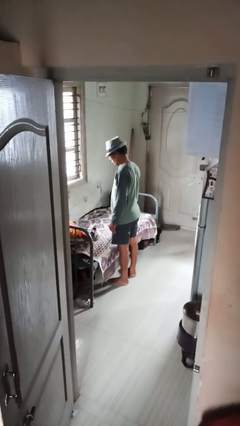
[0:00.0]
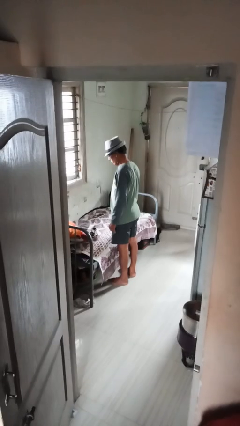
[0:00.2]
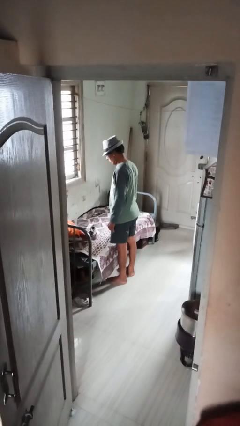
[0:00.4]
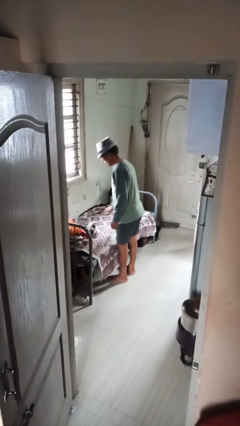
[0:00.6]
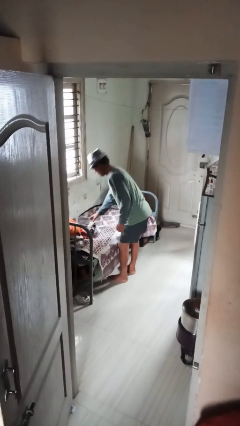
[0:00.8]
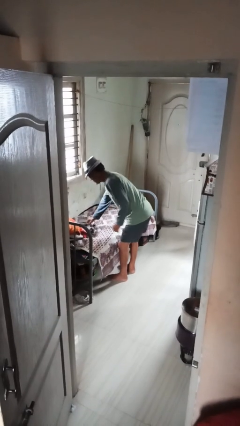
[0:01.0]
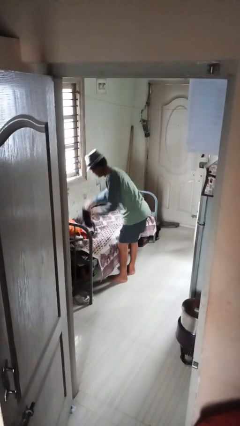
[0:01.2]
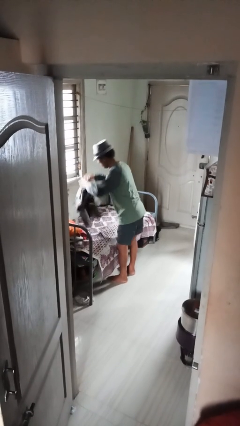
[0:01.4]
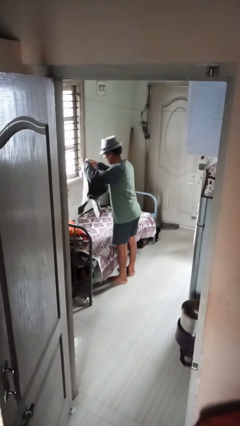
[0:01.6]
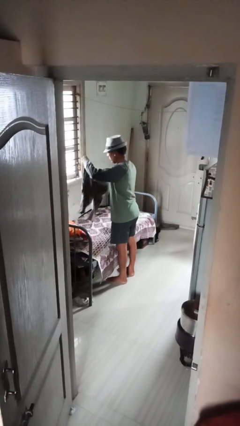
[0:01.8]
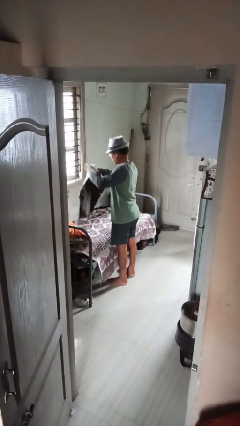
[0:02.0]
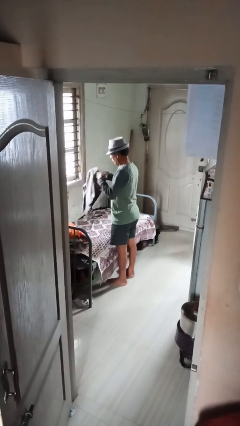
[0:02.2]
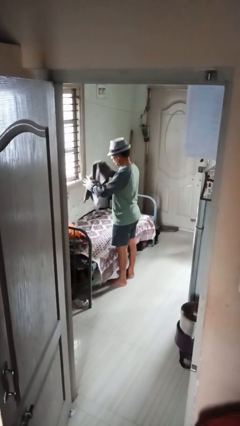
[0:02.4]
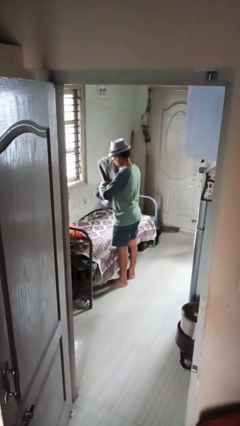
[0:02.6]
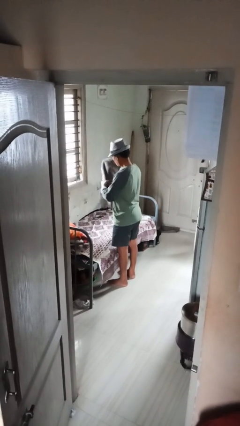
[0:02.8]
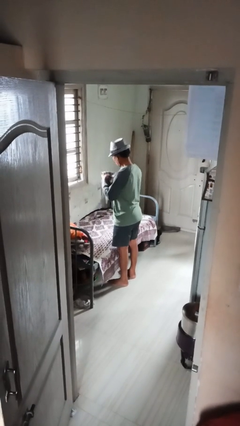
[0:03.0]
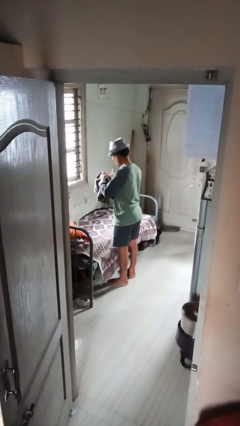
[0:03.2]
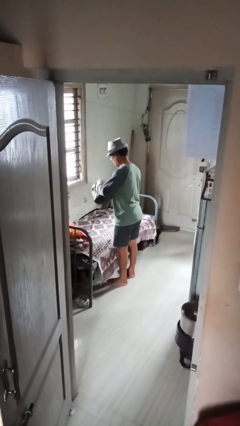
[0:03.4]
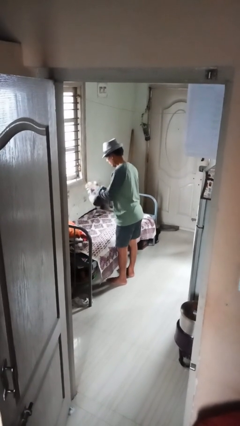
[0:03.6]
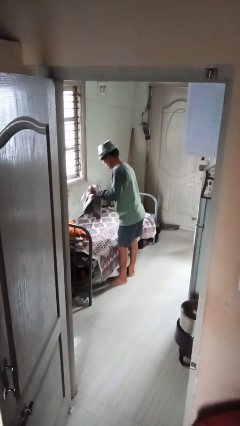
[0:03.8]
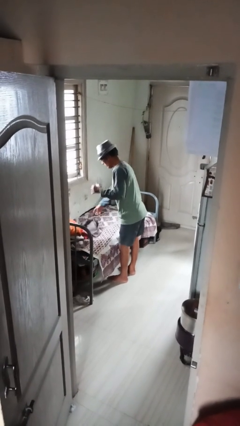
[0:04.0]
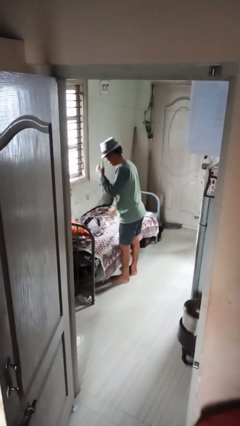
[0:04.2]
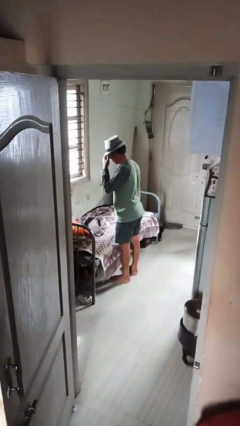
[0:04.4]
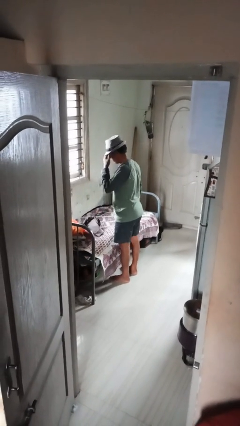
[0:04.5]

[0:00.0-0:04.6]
person folds pants

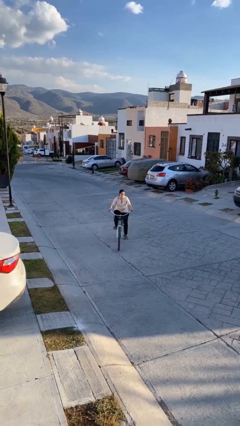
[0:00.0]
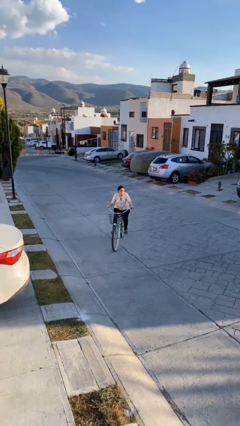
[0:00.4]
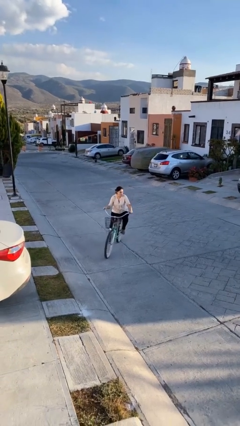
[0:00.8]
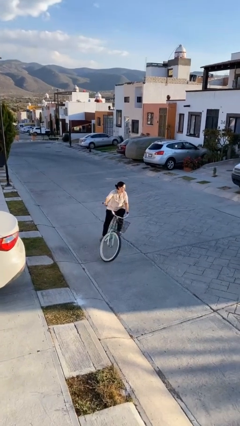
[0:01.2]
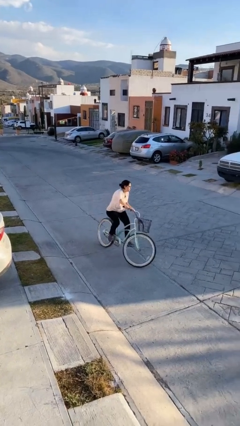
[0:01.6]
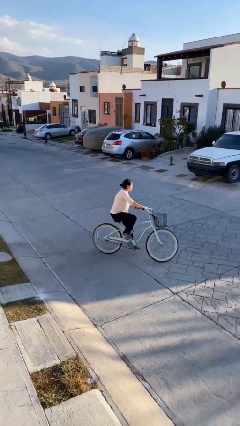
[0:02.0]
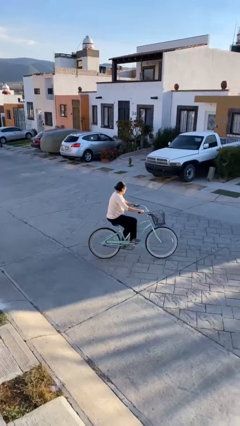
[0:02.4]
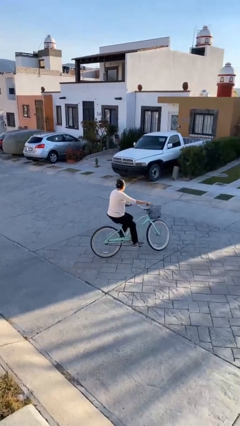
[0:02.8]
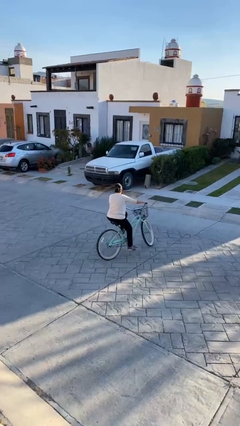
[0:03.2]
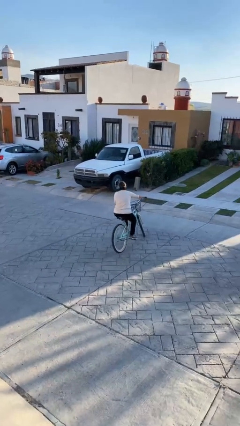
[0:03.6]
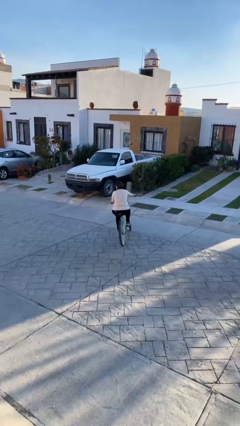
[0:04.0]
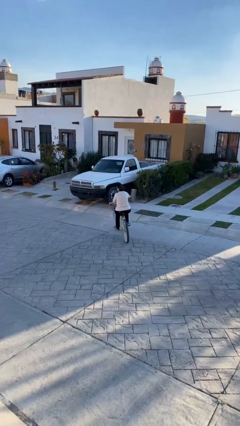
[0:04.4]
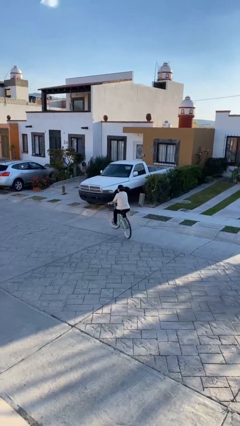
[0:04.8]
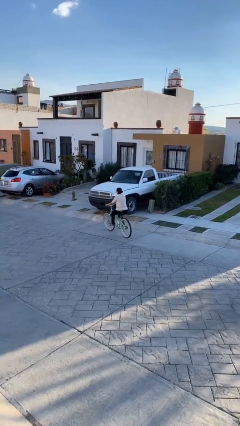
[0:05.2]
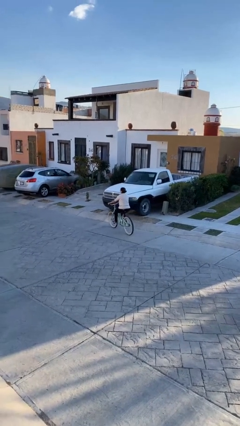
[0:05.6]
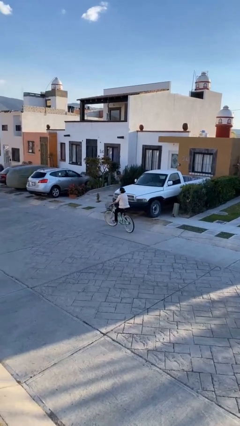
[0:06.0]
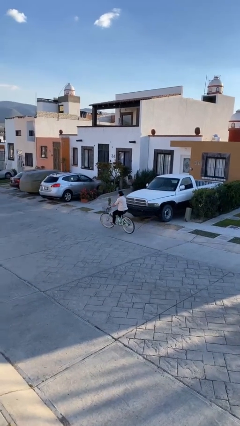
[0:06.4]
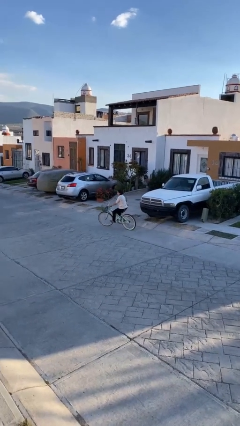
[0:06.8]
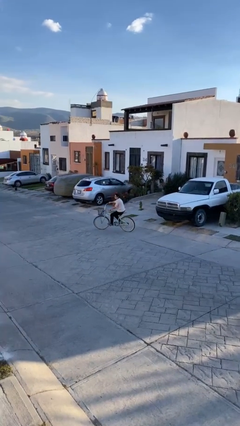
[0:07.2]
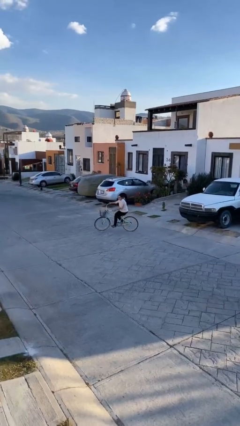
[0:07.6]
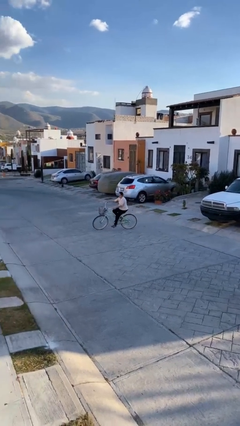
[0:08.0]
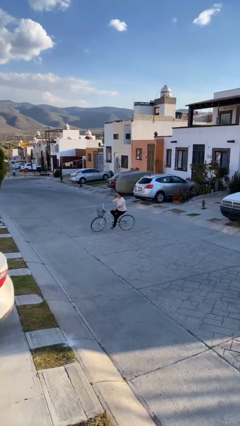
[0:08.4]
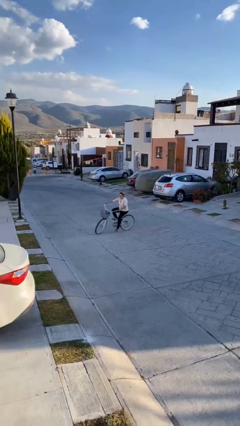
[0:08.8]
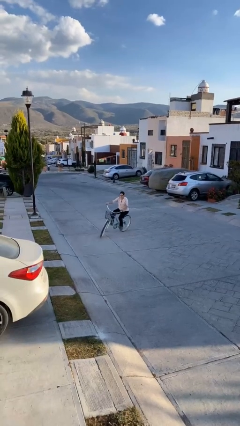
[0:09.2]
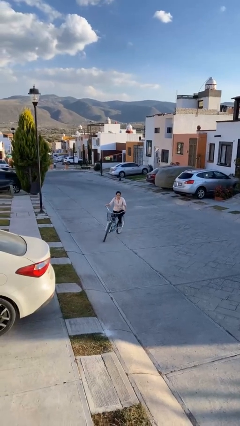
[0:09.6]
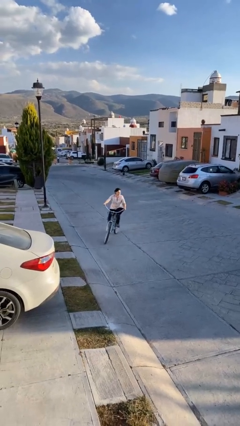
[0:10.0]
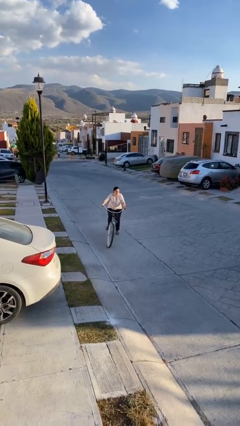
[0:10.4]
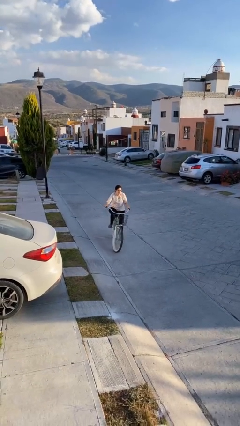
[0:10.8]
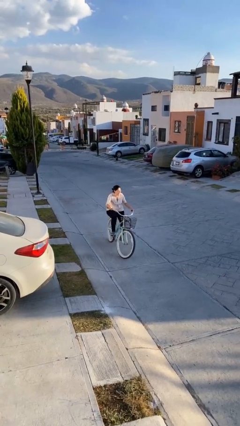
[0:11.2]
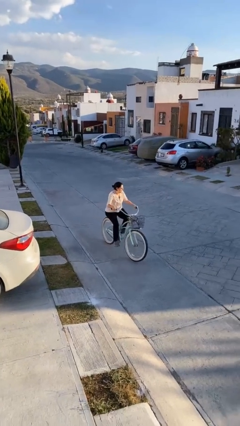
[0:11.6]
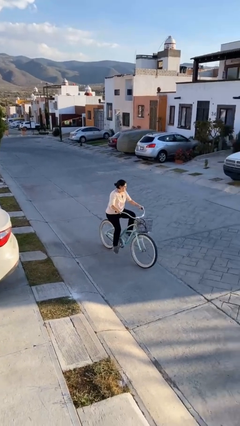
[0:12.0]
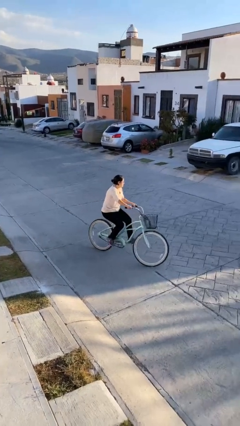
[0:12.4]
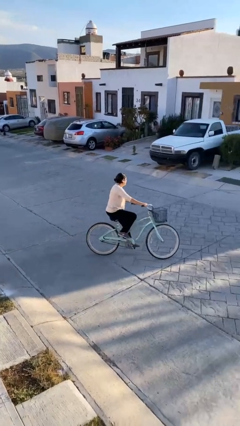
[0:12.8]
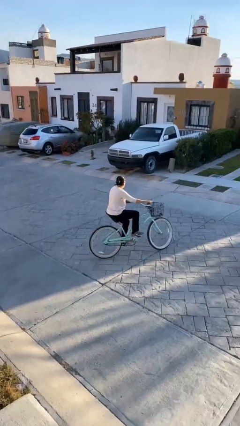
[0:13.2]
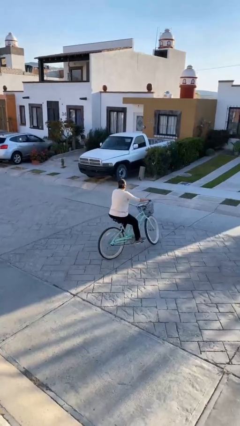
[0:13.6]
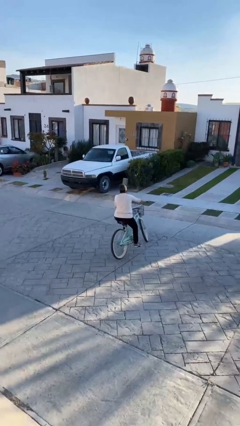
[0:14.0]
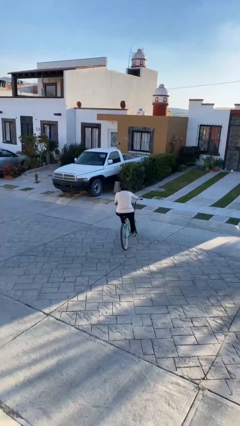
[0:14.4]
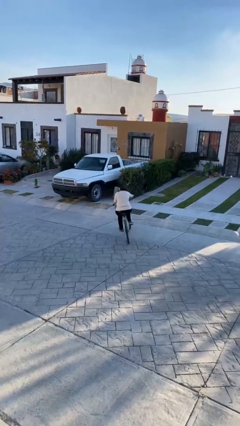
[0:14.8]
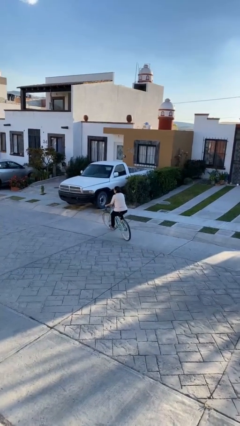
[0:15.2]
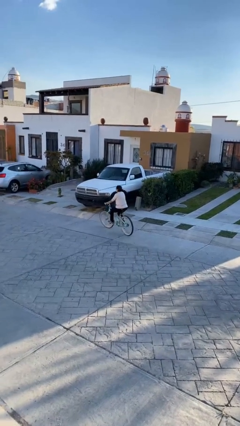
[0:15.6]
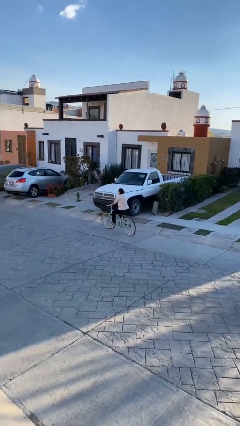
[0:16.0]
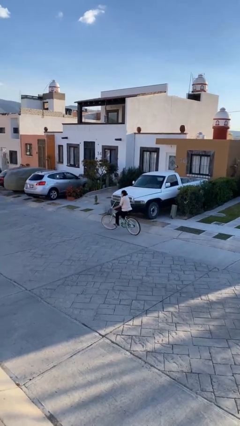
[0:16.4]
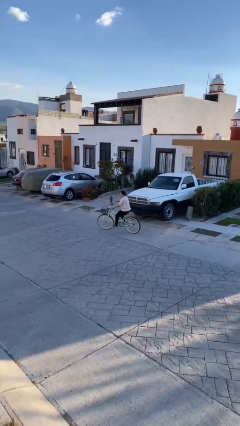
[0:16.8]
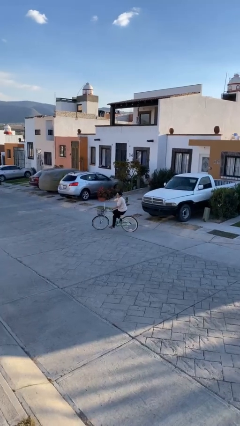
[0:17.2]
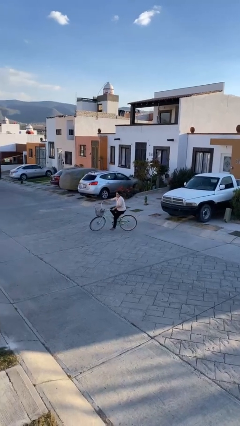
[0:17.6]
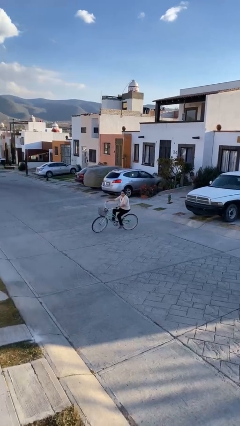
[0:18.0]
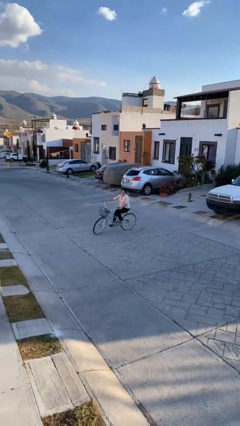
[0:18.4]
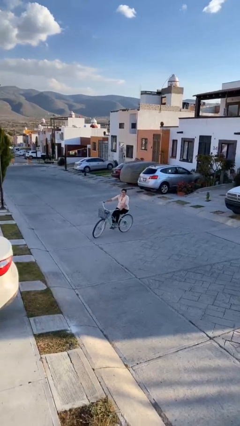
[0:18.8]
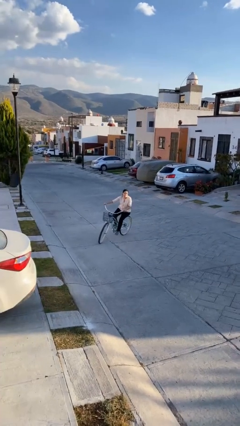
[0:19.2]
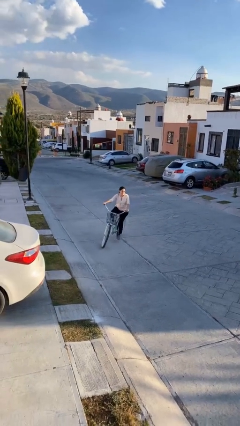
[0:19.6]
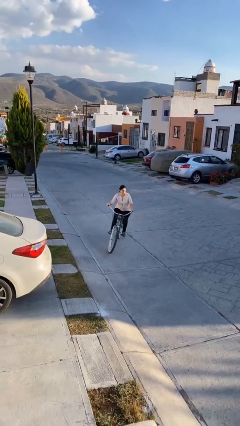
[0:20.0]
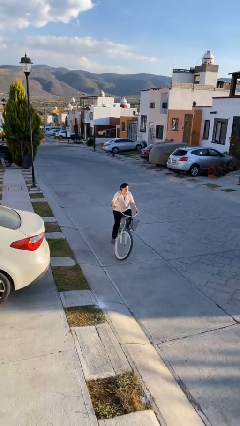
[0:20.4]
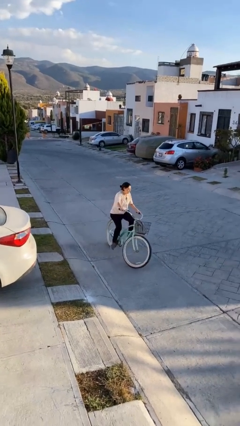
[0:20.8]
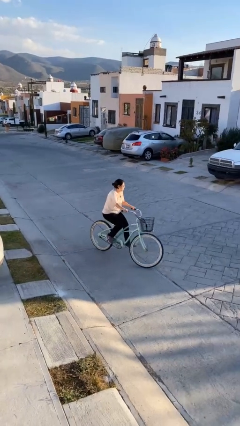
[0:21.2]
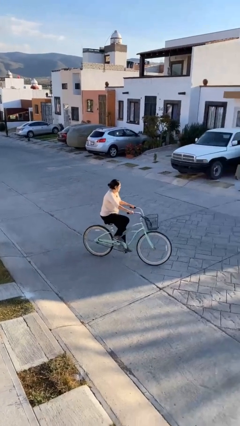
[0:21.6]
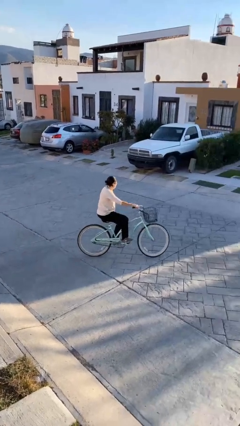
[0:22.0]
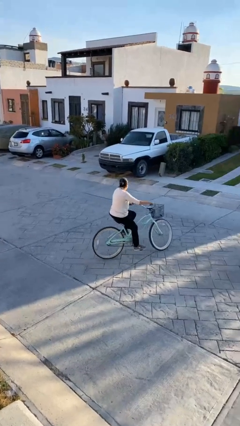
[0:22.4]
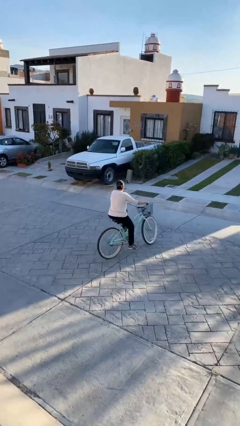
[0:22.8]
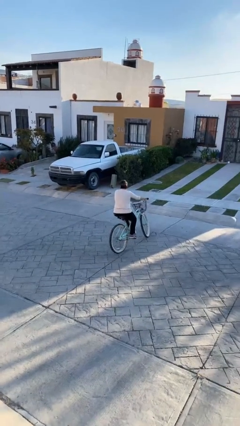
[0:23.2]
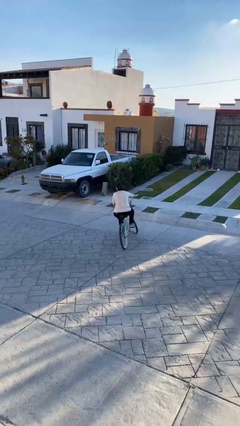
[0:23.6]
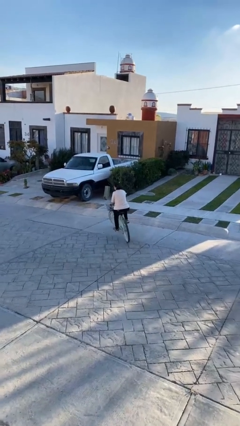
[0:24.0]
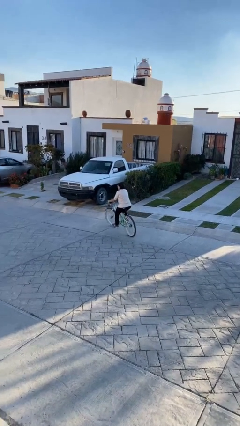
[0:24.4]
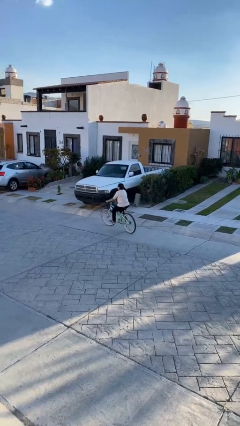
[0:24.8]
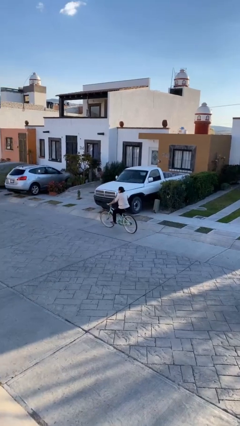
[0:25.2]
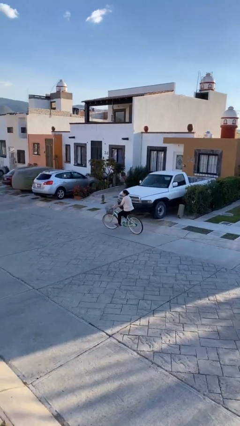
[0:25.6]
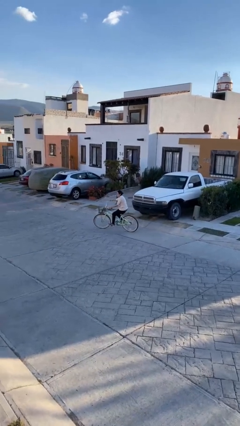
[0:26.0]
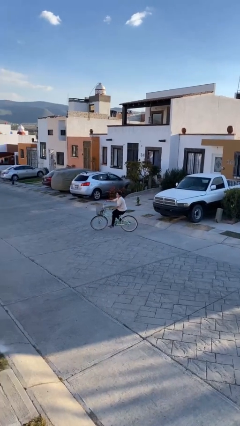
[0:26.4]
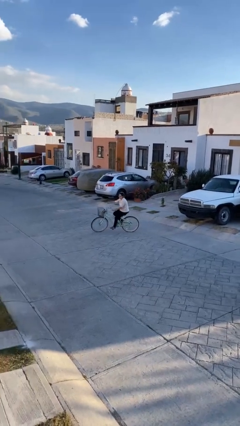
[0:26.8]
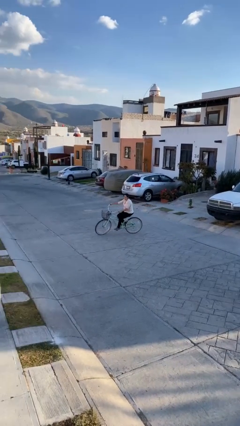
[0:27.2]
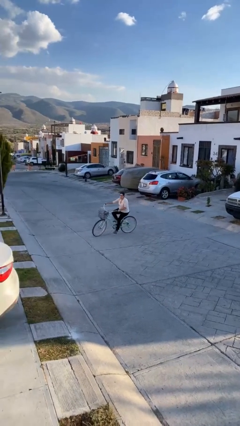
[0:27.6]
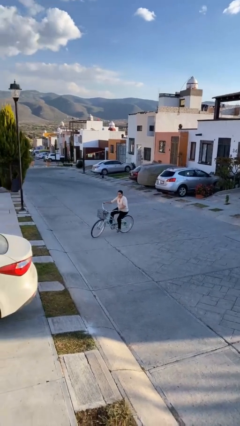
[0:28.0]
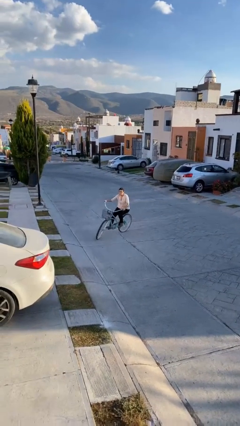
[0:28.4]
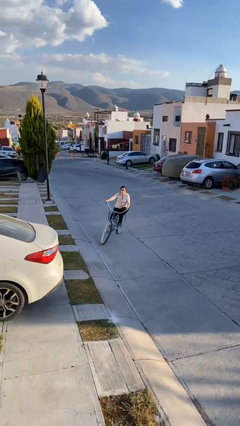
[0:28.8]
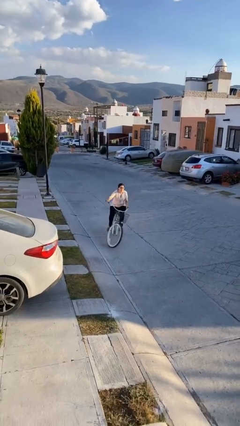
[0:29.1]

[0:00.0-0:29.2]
person rides bicycle
